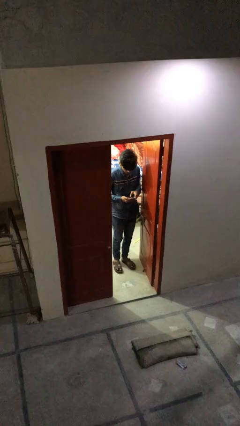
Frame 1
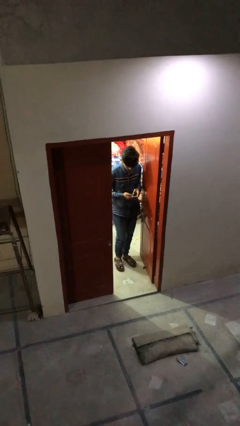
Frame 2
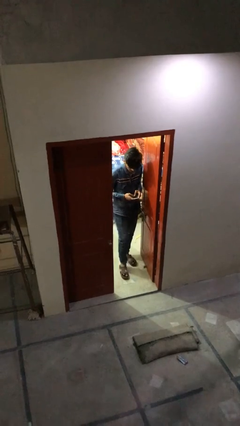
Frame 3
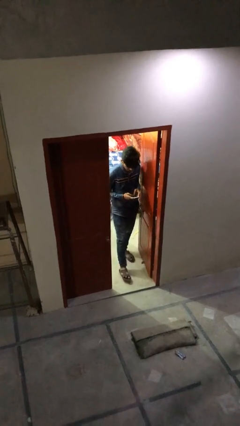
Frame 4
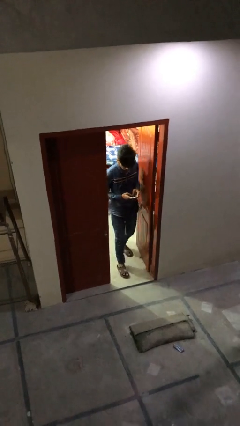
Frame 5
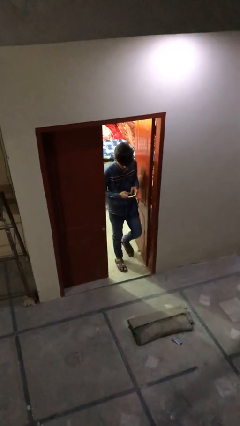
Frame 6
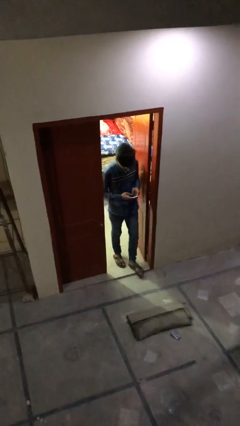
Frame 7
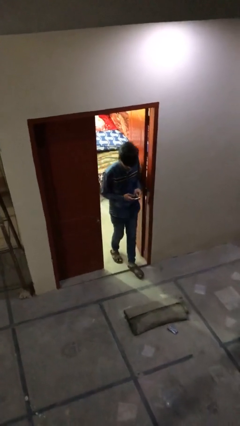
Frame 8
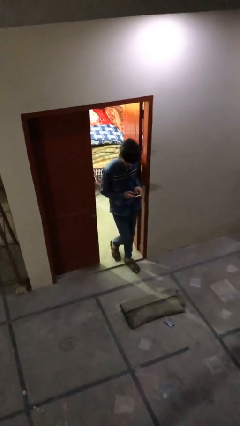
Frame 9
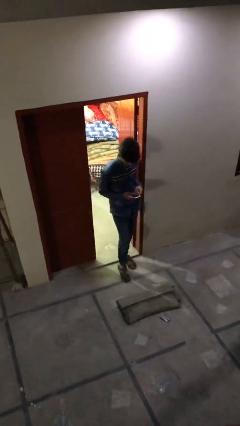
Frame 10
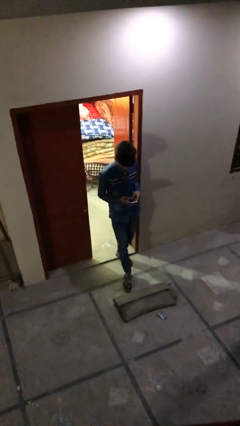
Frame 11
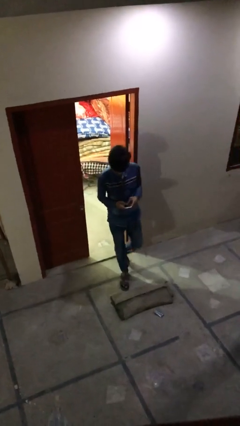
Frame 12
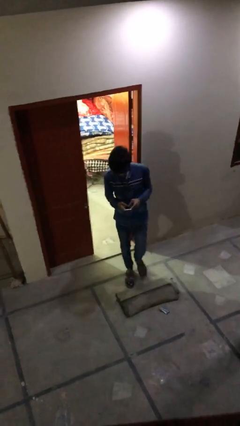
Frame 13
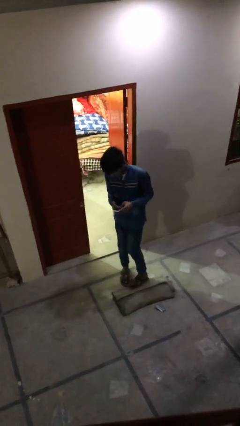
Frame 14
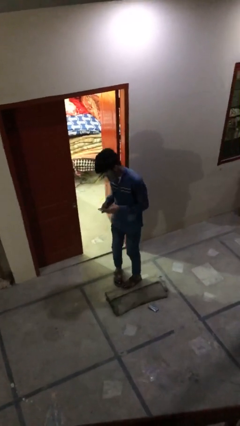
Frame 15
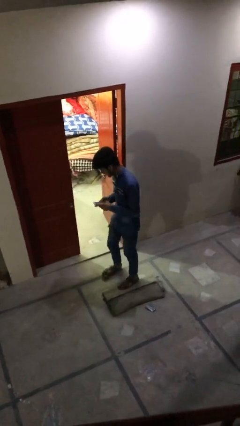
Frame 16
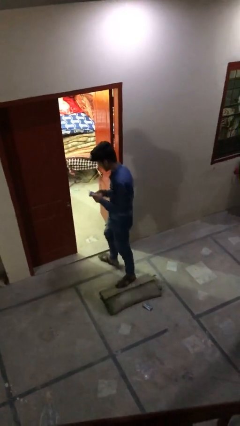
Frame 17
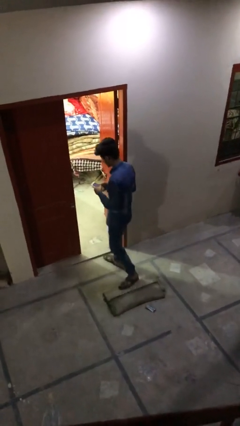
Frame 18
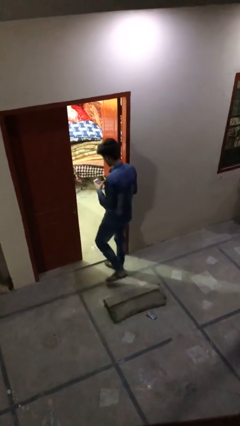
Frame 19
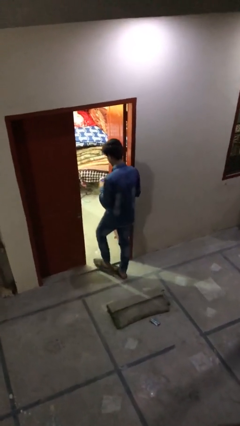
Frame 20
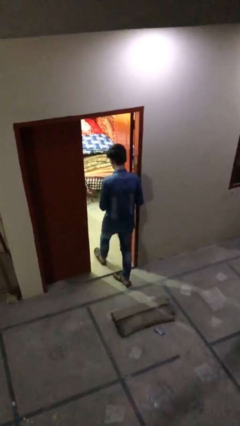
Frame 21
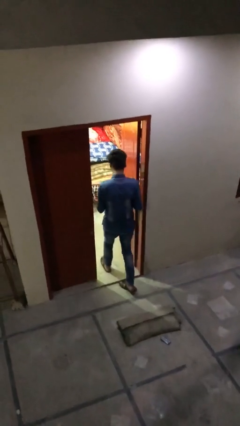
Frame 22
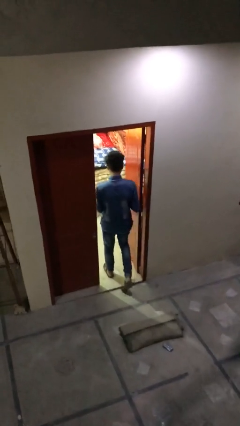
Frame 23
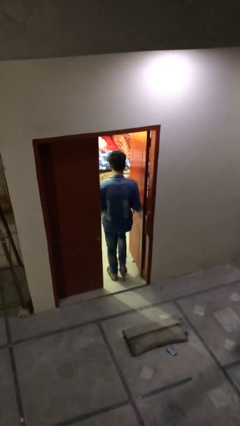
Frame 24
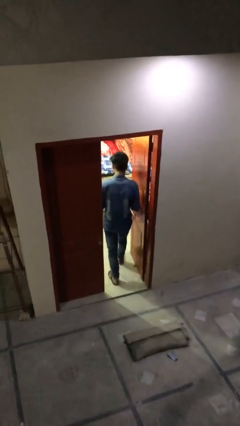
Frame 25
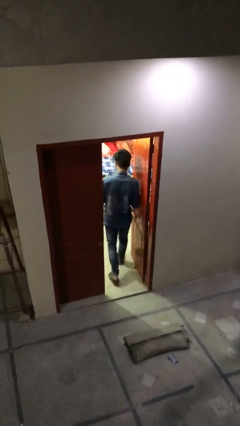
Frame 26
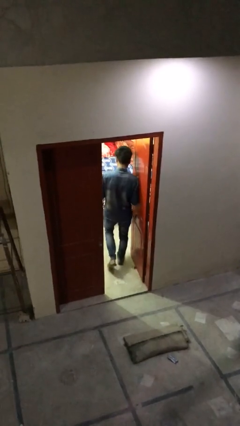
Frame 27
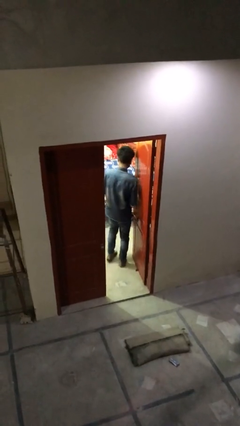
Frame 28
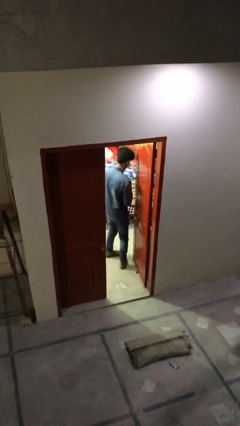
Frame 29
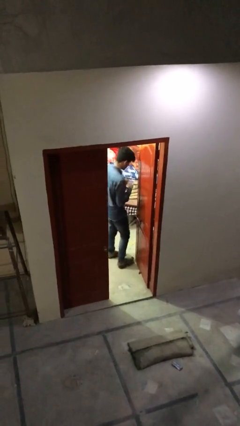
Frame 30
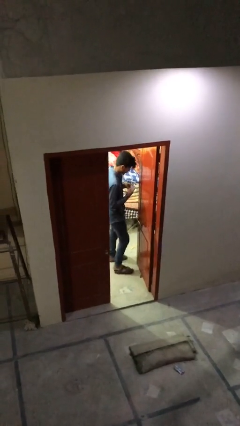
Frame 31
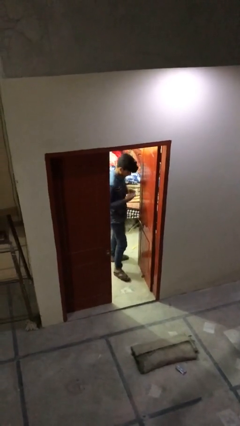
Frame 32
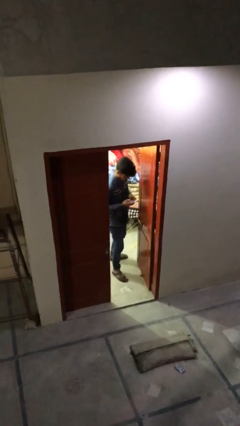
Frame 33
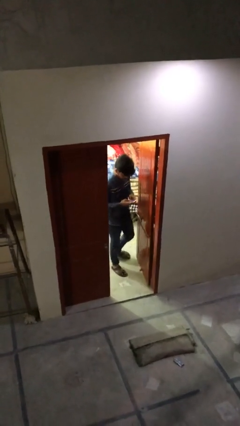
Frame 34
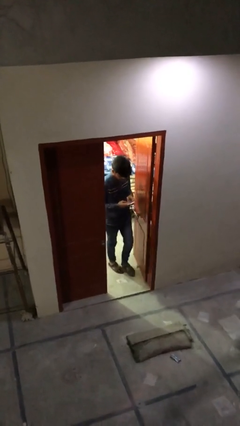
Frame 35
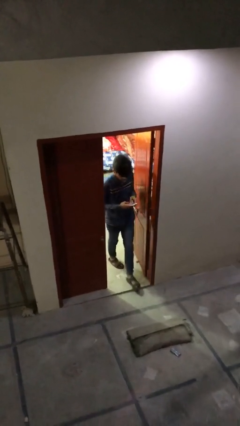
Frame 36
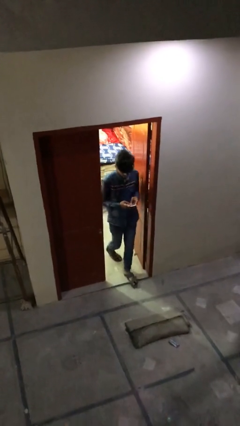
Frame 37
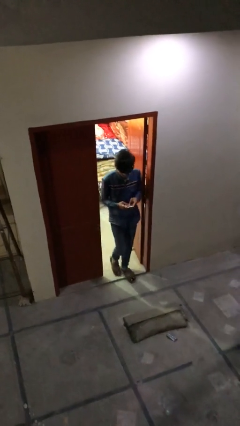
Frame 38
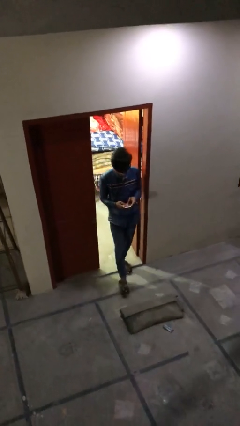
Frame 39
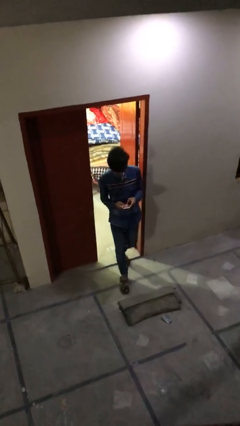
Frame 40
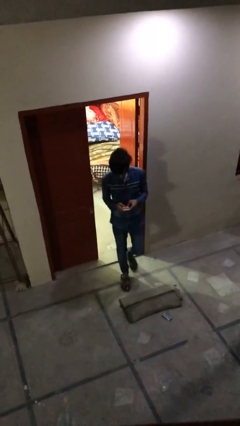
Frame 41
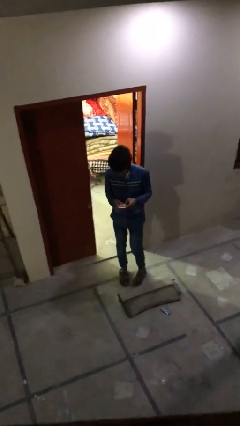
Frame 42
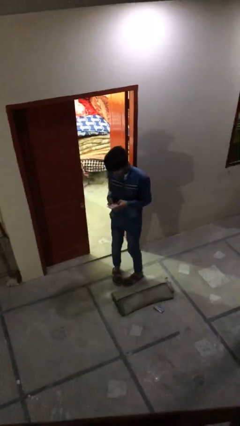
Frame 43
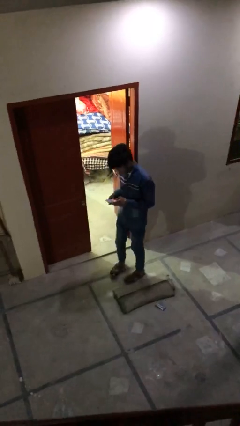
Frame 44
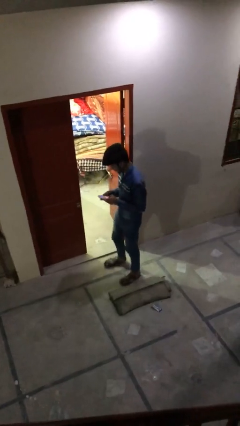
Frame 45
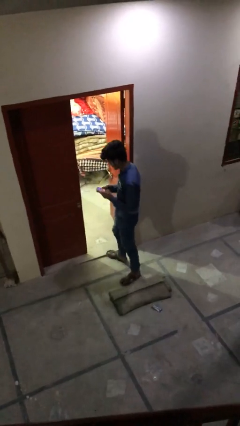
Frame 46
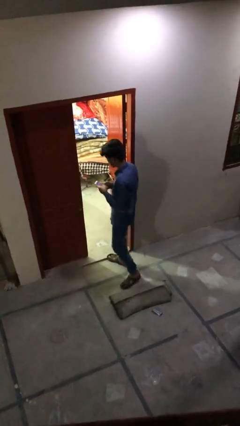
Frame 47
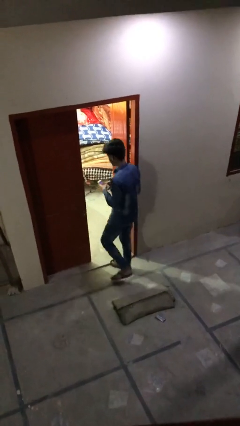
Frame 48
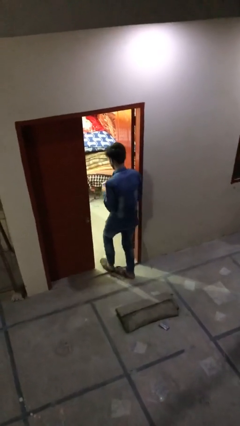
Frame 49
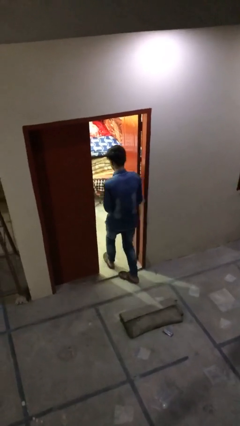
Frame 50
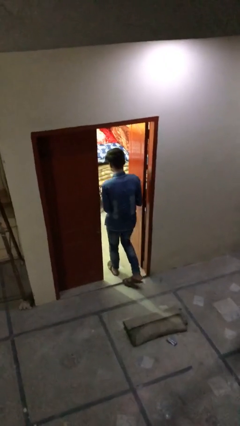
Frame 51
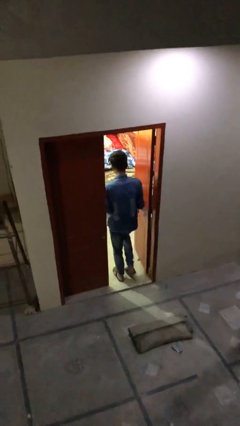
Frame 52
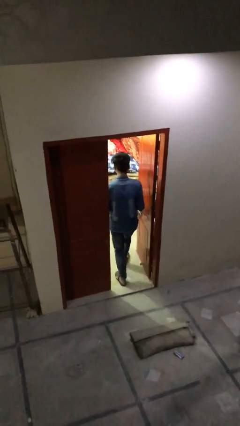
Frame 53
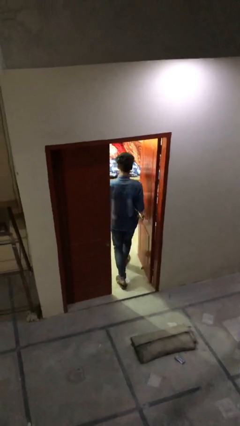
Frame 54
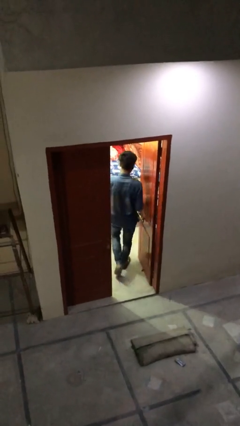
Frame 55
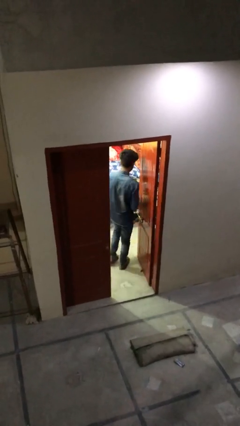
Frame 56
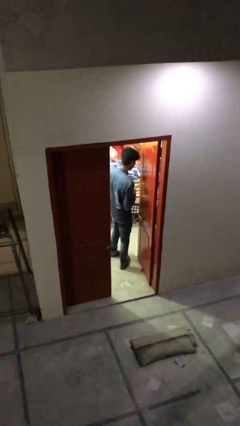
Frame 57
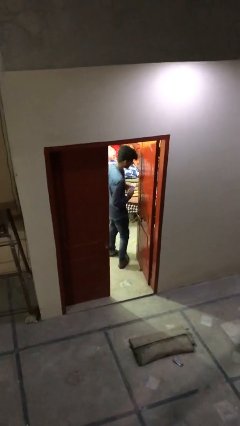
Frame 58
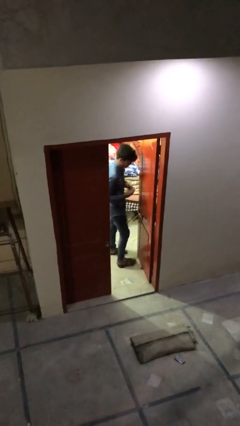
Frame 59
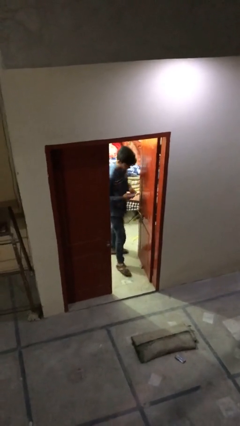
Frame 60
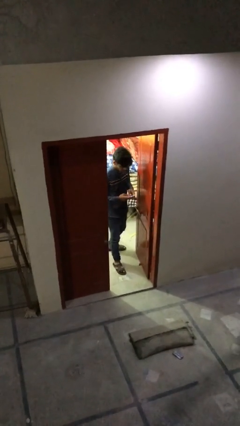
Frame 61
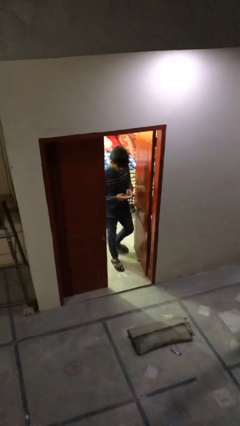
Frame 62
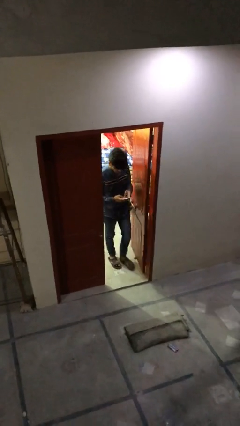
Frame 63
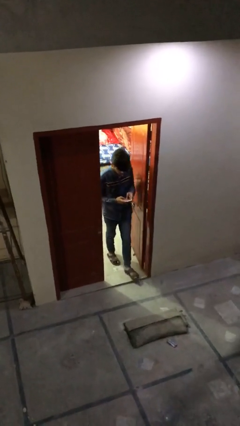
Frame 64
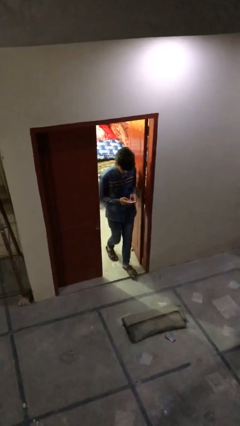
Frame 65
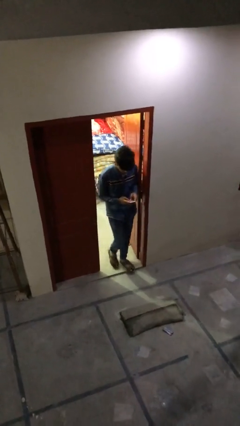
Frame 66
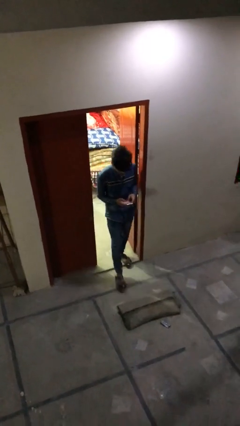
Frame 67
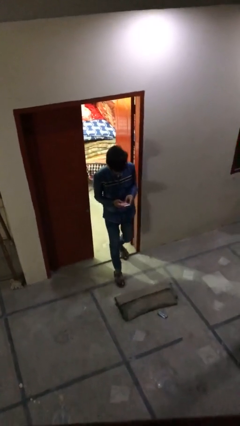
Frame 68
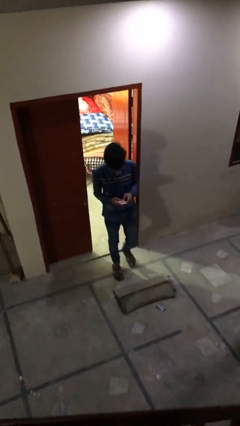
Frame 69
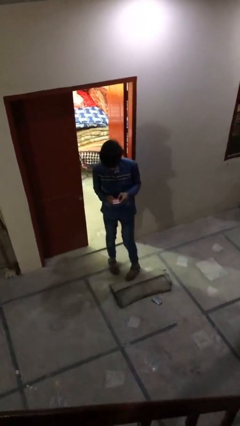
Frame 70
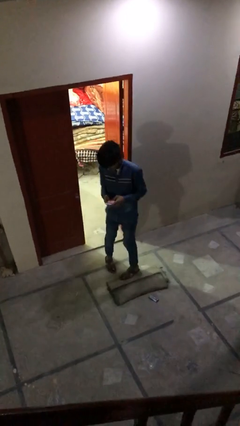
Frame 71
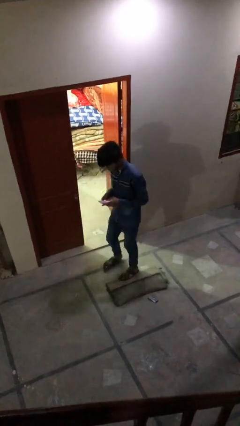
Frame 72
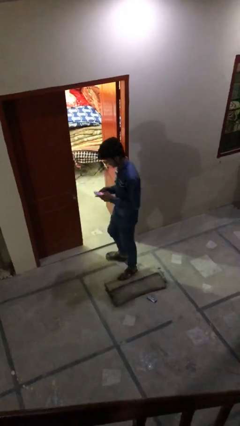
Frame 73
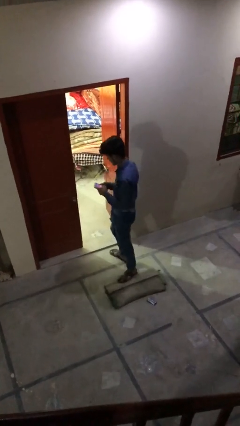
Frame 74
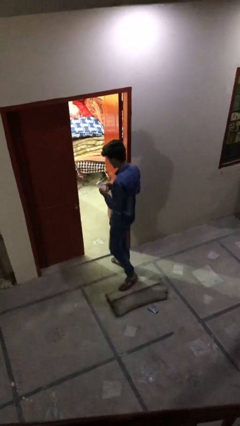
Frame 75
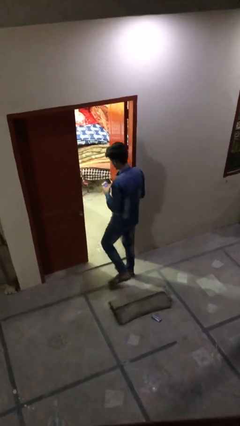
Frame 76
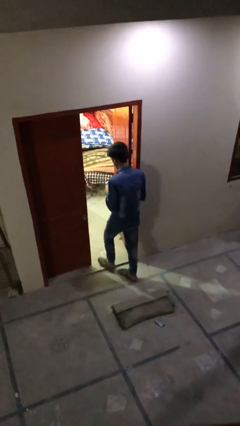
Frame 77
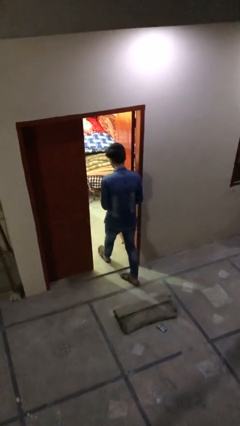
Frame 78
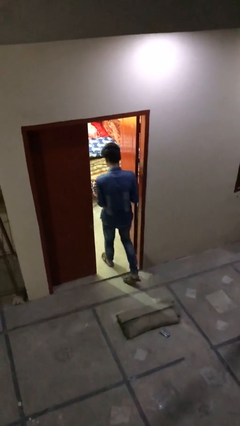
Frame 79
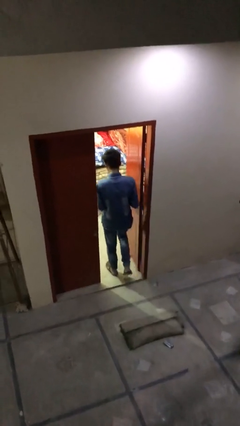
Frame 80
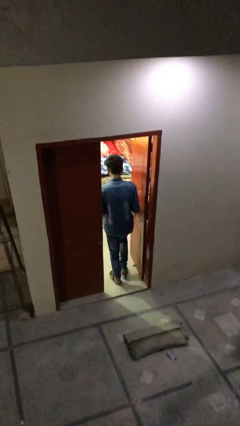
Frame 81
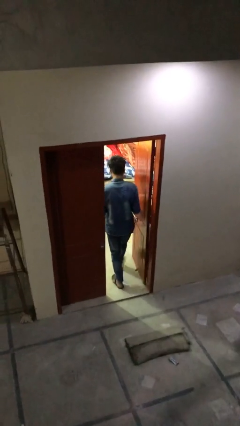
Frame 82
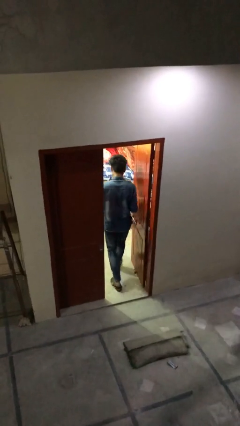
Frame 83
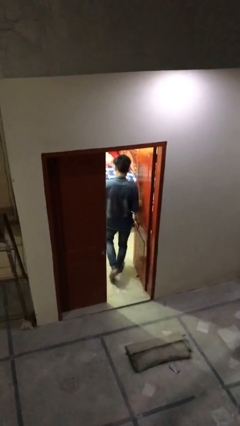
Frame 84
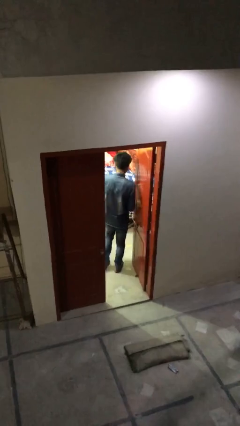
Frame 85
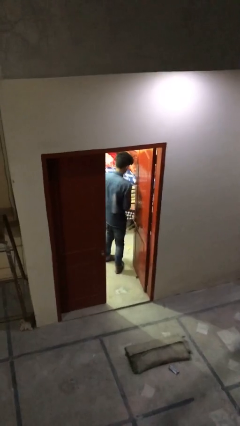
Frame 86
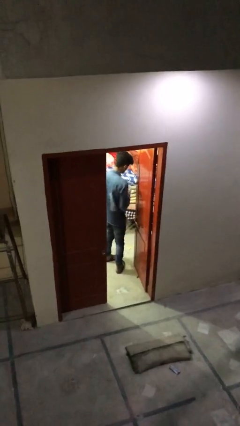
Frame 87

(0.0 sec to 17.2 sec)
person texts on phone

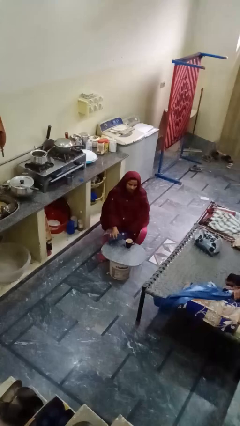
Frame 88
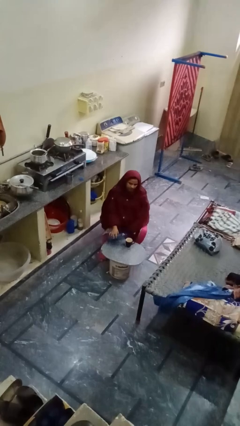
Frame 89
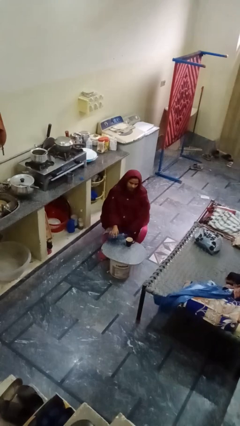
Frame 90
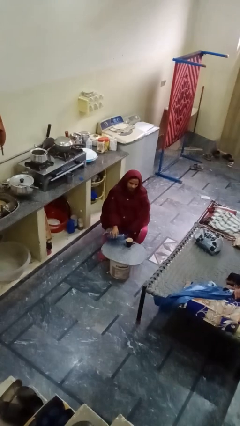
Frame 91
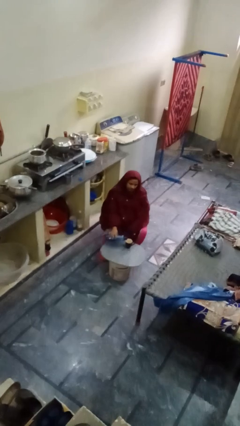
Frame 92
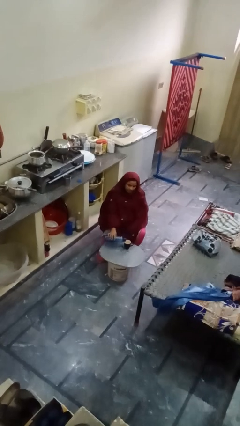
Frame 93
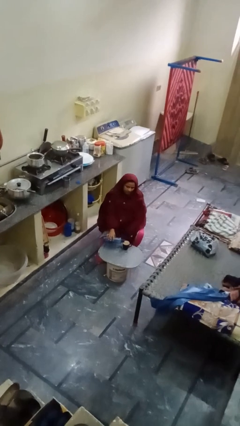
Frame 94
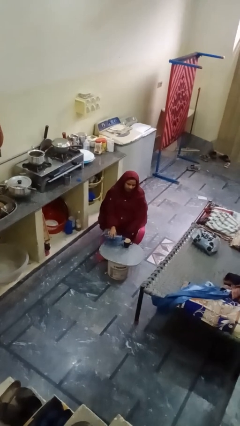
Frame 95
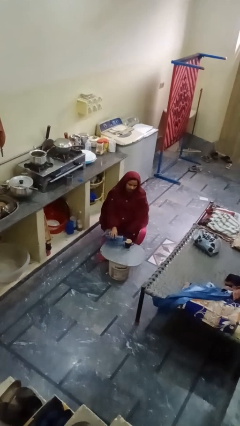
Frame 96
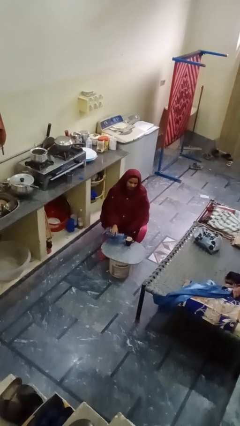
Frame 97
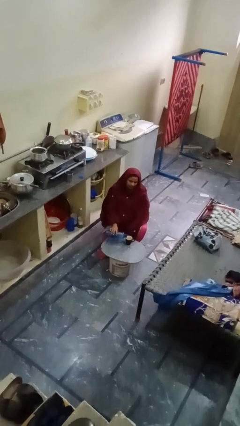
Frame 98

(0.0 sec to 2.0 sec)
person pours liquid into cup
